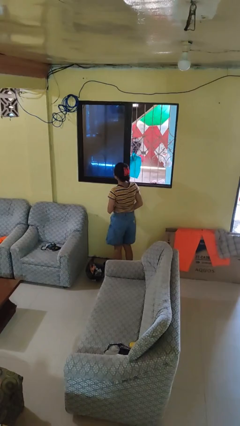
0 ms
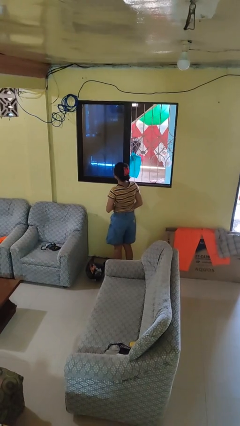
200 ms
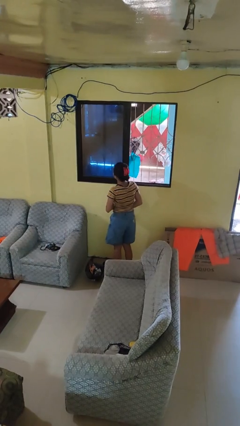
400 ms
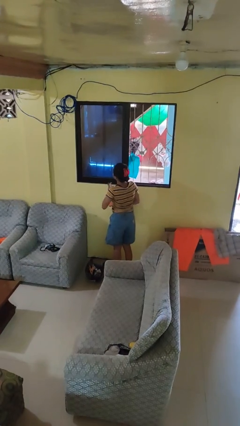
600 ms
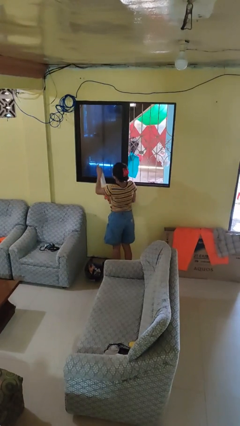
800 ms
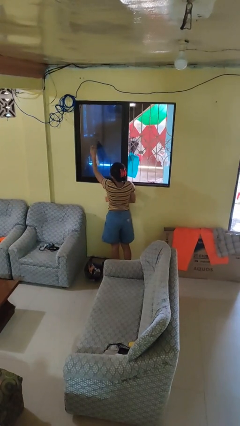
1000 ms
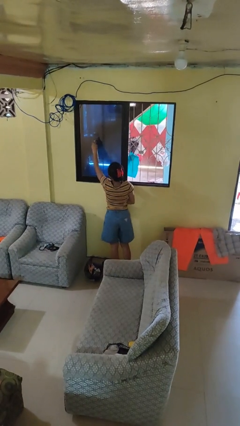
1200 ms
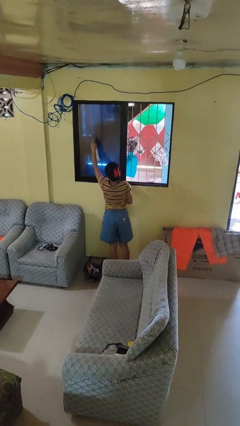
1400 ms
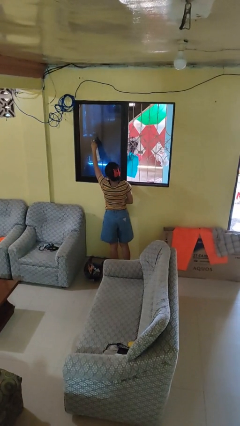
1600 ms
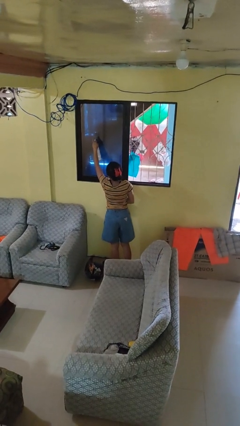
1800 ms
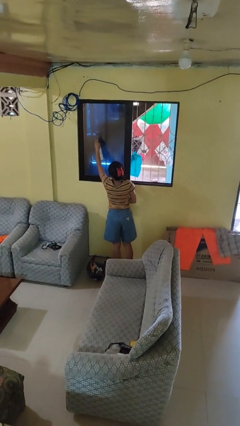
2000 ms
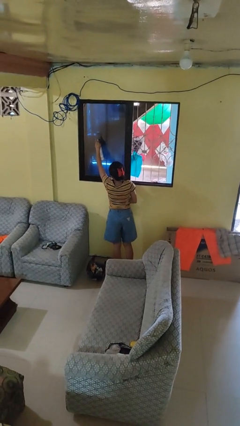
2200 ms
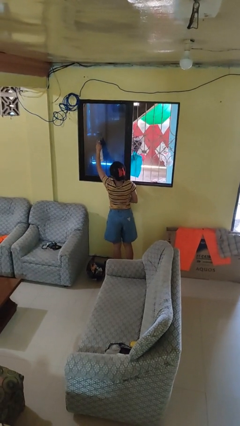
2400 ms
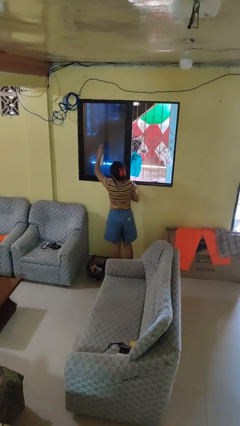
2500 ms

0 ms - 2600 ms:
person sprays from bottle

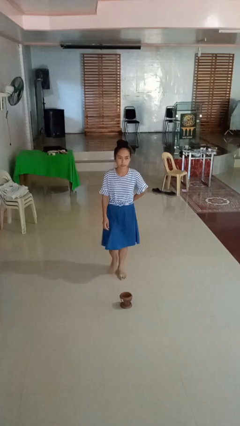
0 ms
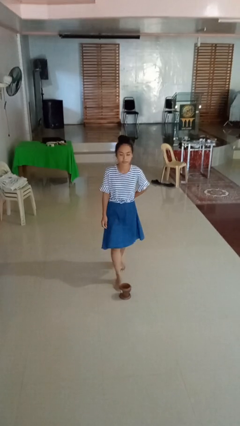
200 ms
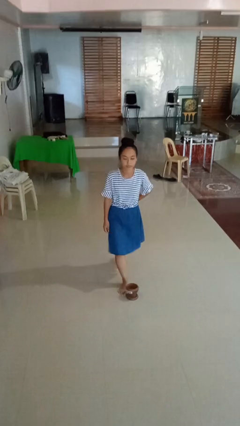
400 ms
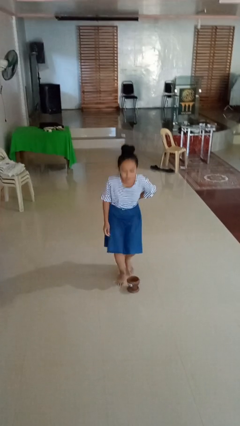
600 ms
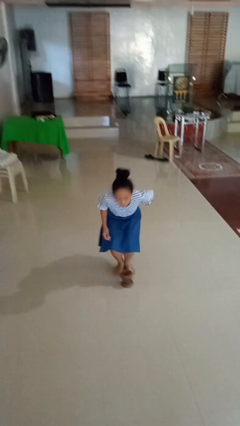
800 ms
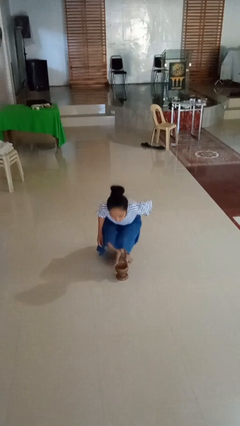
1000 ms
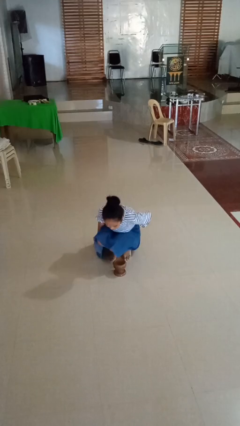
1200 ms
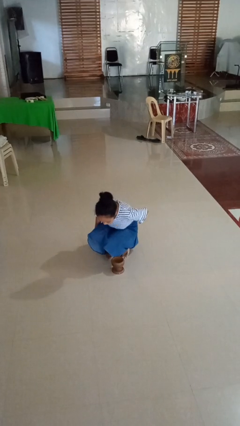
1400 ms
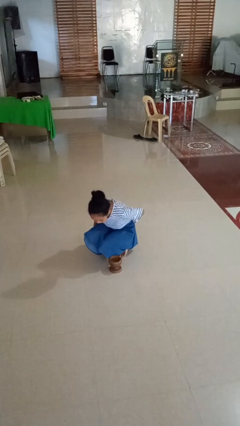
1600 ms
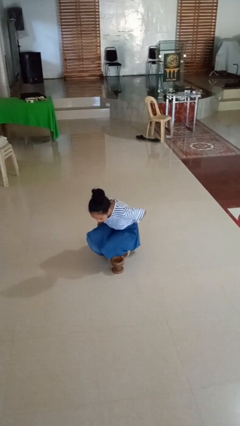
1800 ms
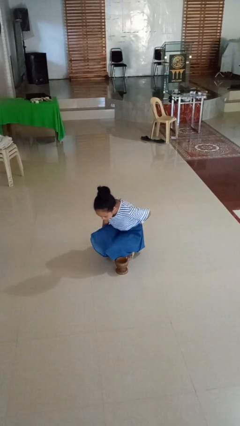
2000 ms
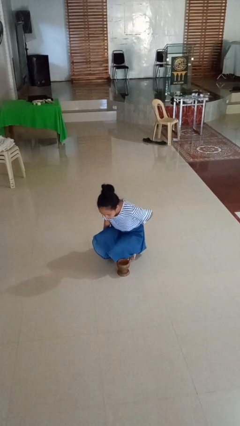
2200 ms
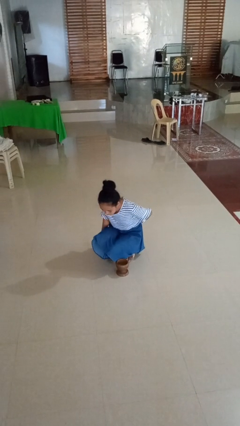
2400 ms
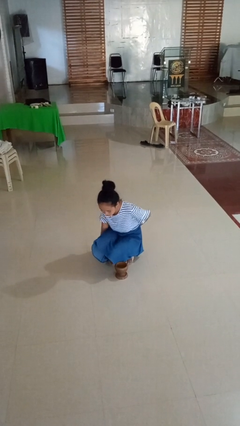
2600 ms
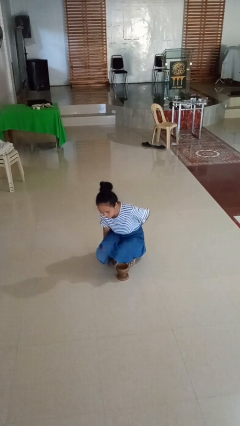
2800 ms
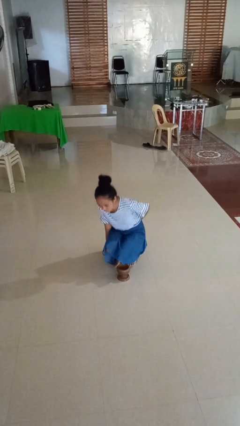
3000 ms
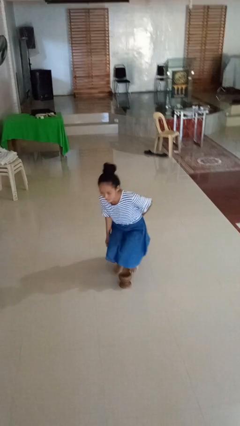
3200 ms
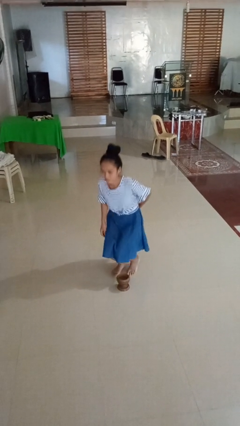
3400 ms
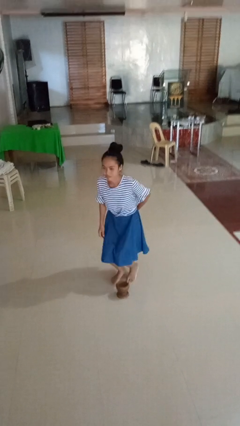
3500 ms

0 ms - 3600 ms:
person trips on object on floor

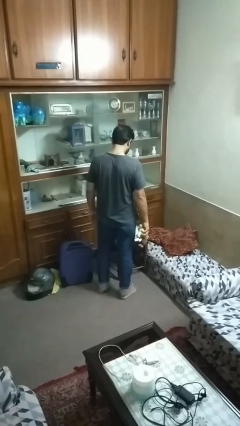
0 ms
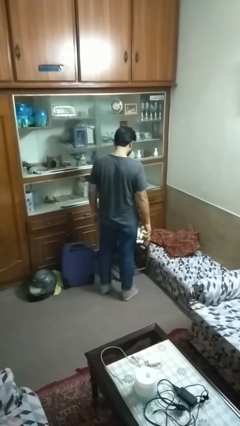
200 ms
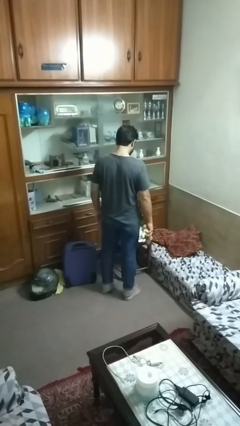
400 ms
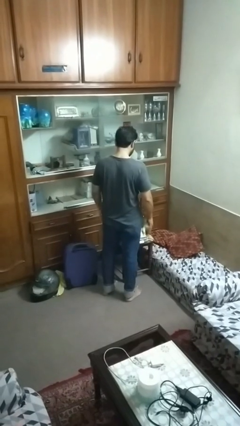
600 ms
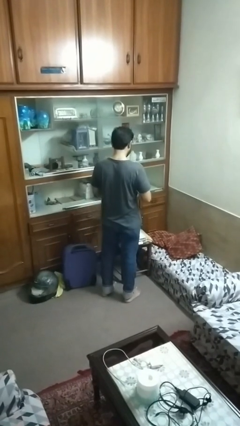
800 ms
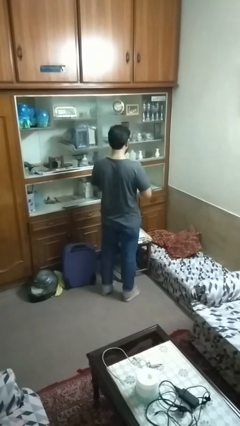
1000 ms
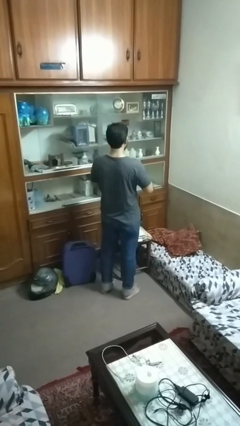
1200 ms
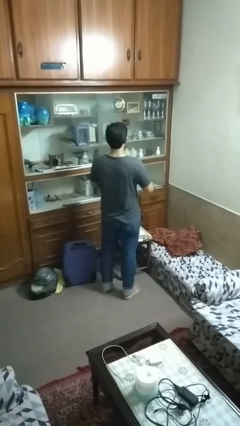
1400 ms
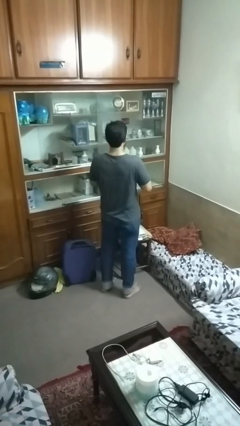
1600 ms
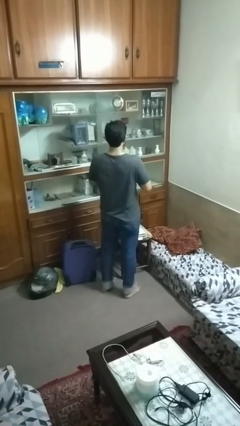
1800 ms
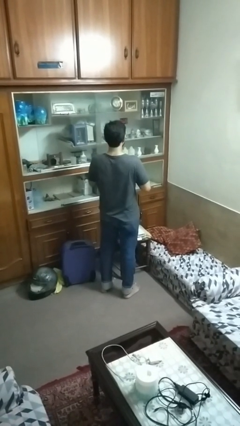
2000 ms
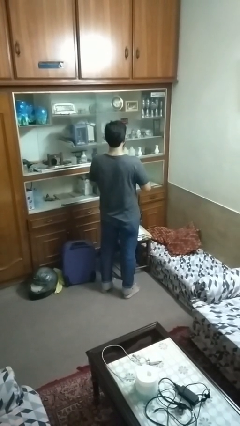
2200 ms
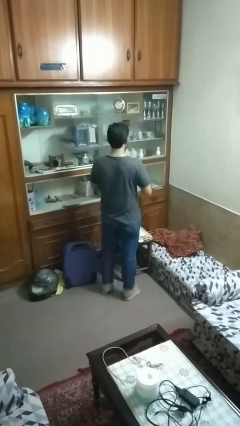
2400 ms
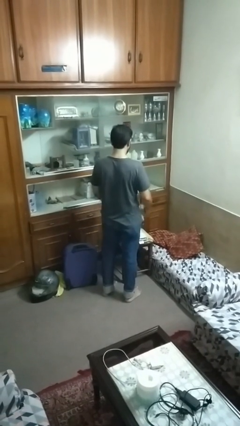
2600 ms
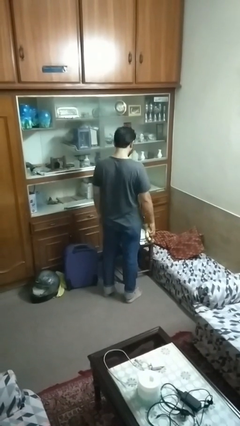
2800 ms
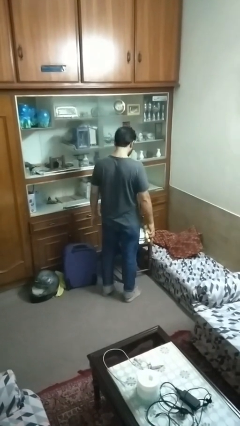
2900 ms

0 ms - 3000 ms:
person hugs stuffed animal

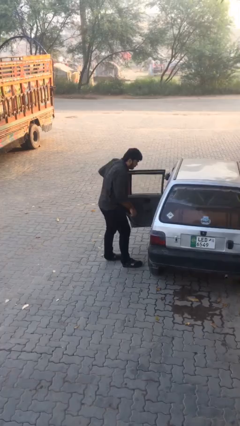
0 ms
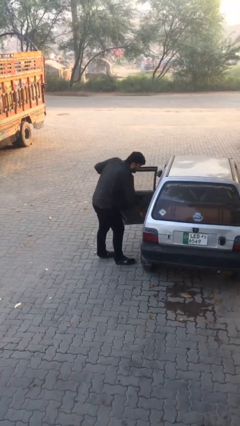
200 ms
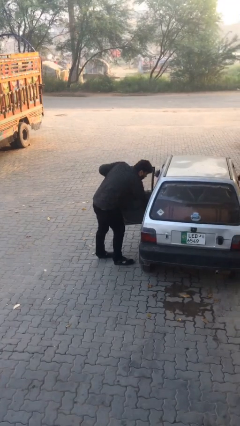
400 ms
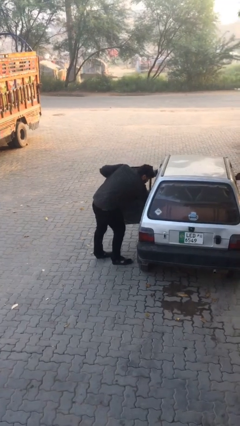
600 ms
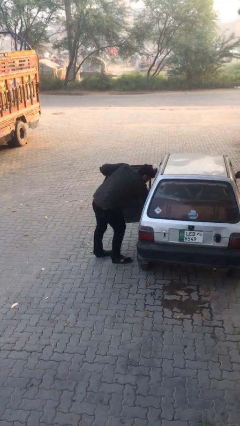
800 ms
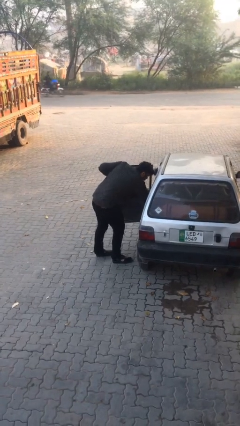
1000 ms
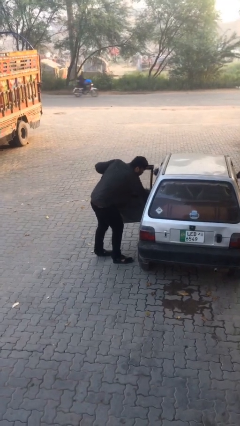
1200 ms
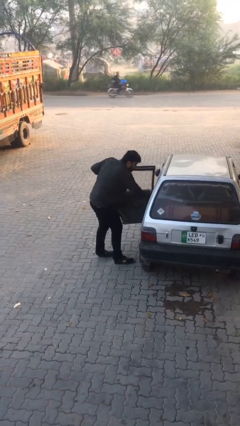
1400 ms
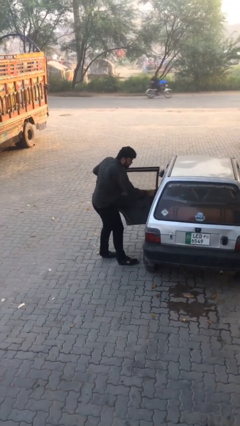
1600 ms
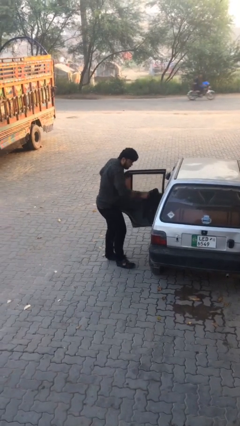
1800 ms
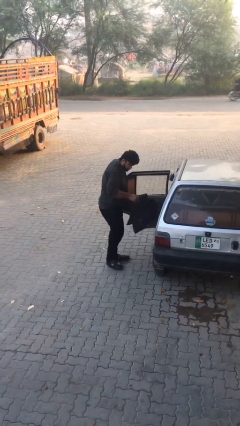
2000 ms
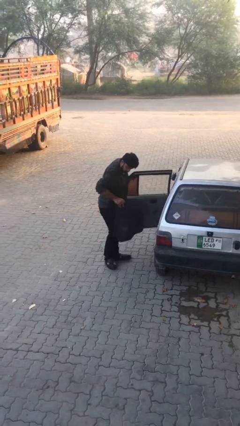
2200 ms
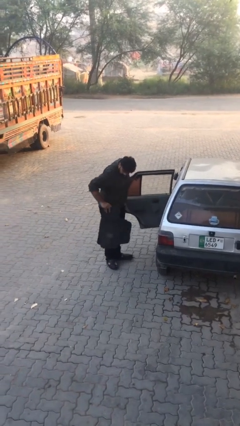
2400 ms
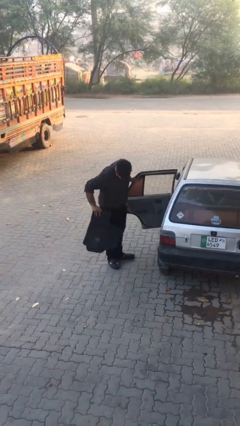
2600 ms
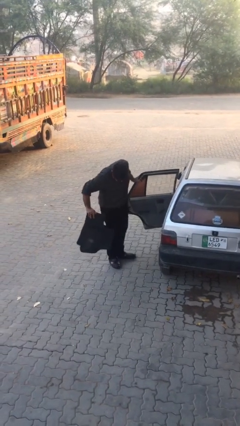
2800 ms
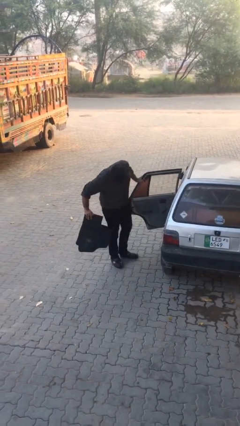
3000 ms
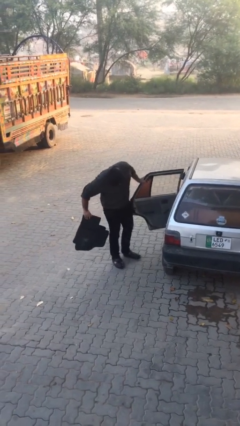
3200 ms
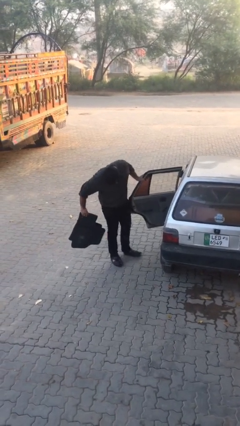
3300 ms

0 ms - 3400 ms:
person unloads car

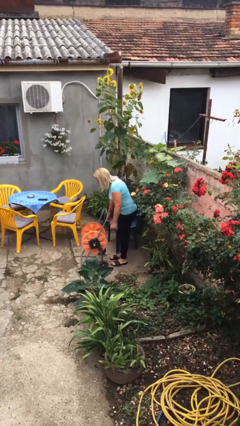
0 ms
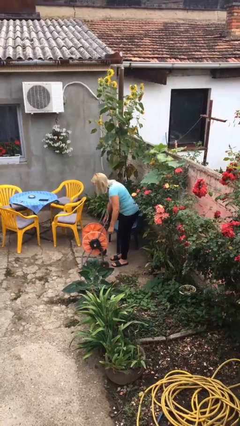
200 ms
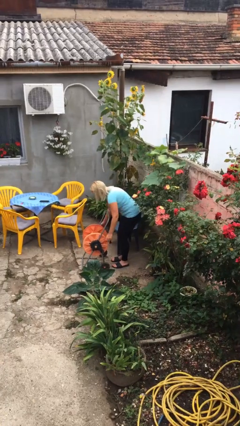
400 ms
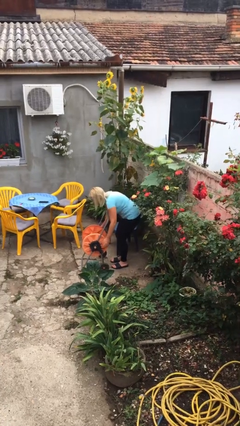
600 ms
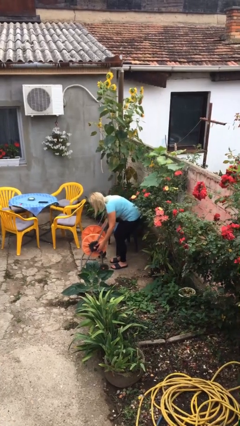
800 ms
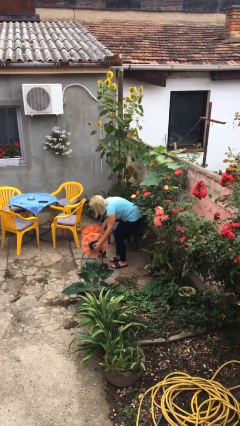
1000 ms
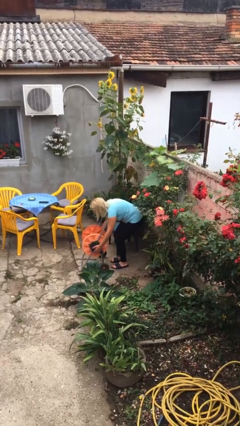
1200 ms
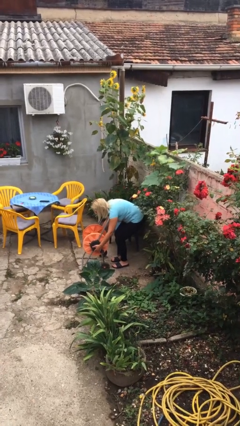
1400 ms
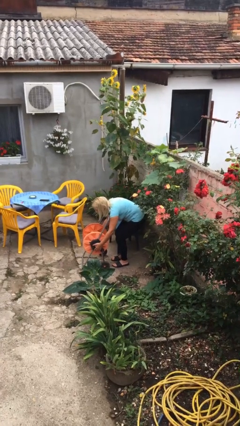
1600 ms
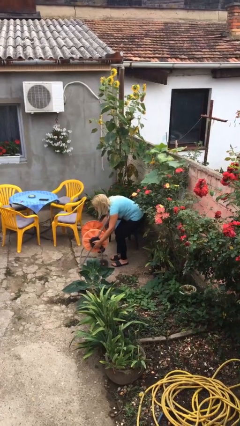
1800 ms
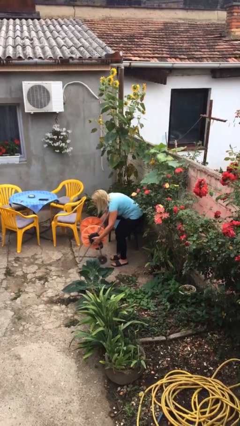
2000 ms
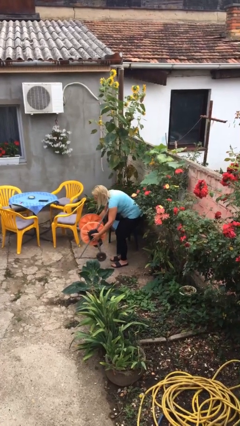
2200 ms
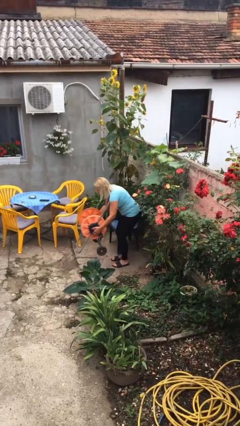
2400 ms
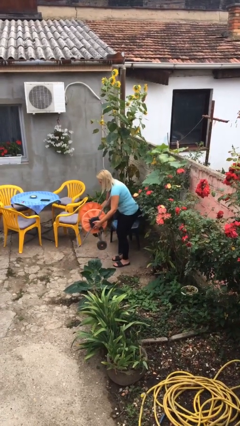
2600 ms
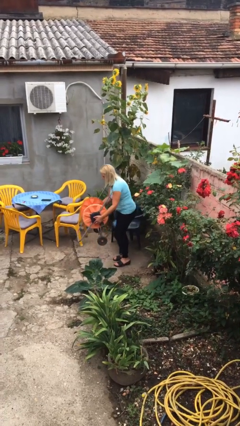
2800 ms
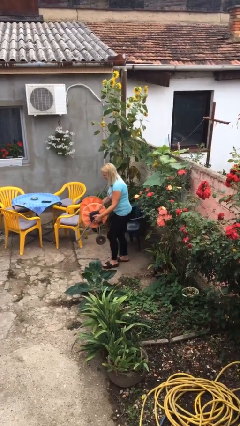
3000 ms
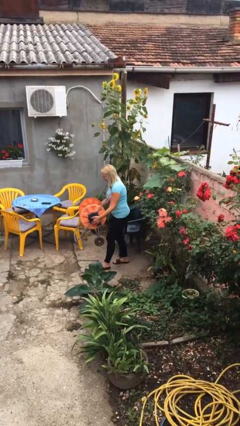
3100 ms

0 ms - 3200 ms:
person picks up object from floor

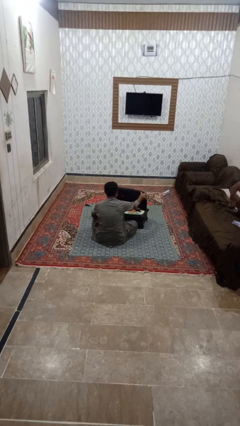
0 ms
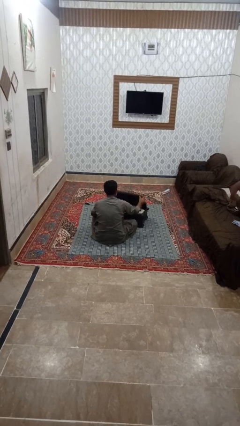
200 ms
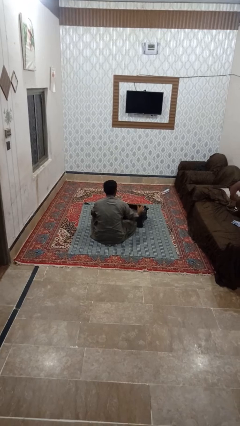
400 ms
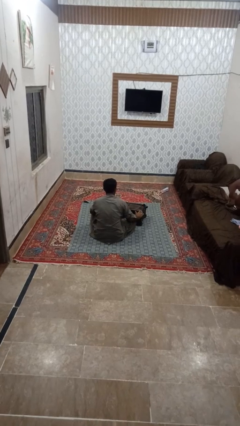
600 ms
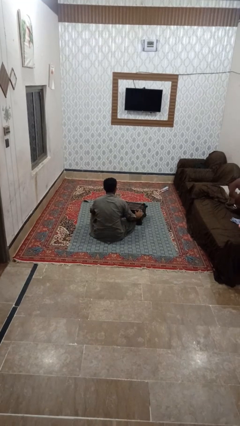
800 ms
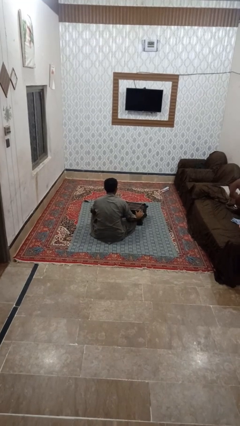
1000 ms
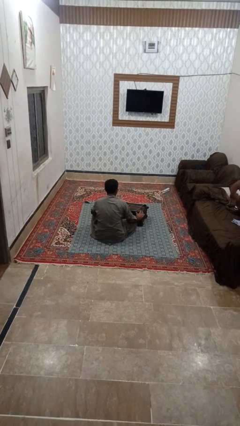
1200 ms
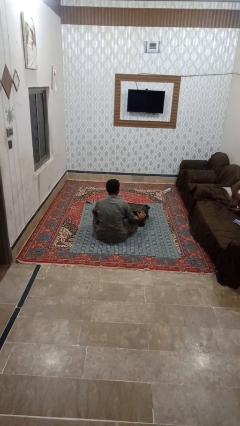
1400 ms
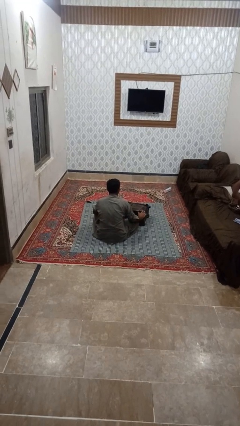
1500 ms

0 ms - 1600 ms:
person closes suitcase
